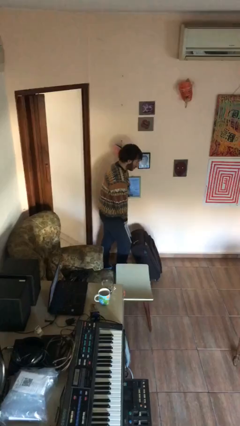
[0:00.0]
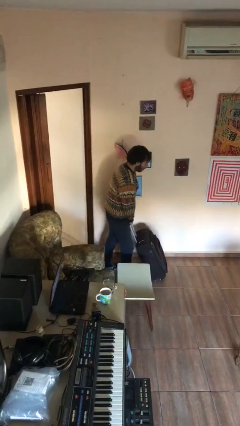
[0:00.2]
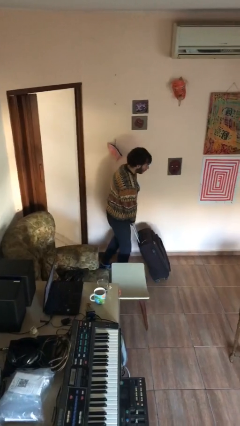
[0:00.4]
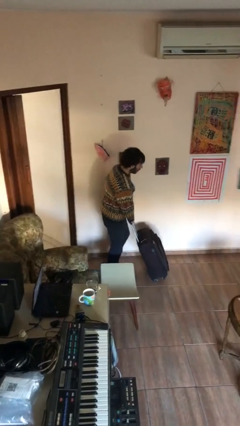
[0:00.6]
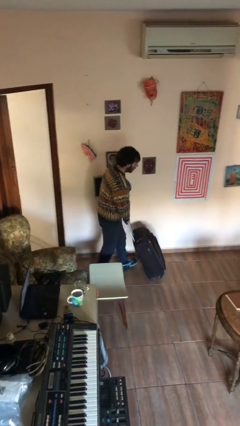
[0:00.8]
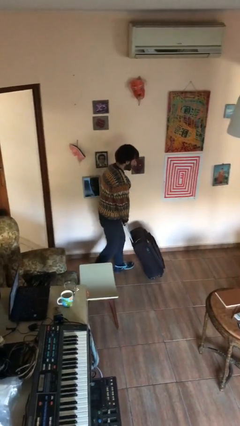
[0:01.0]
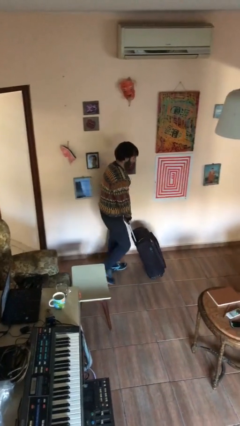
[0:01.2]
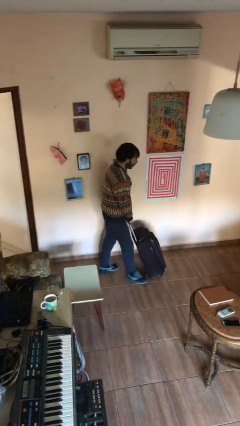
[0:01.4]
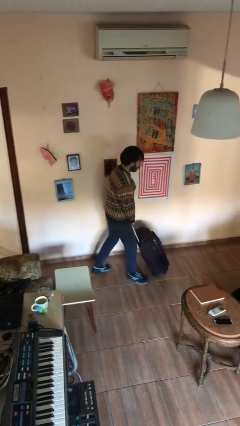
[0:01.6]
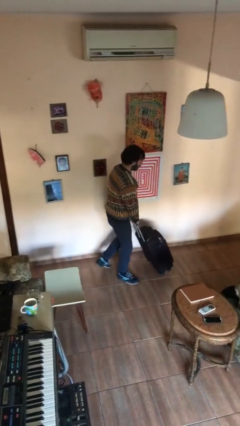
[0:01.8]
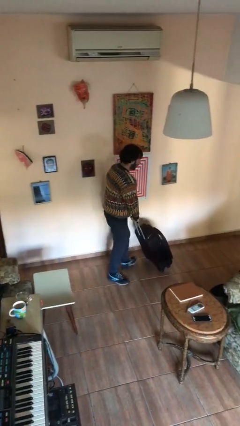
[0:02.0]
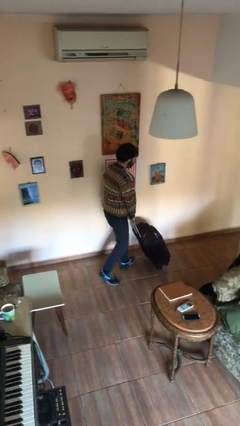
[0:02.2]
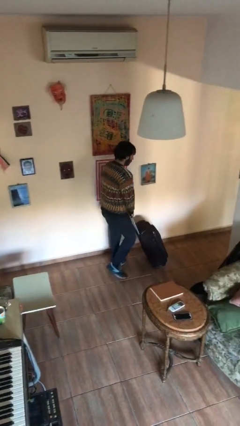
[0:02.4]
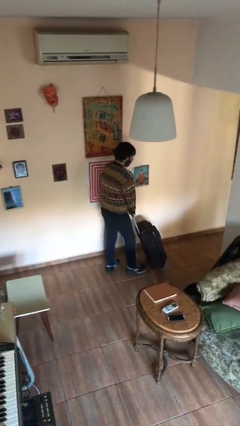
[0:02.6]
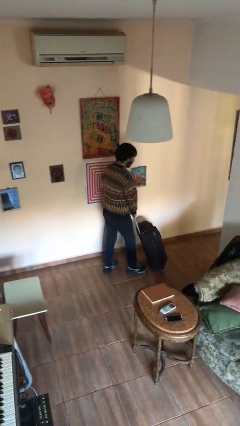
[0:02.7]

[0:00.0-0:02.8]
person pushes wheeled cart

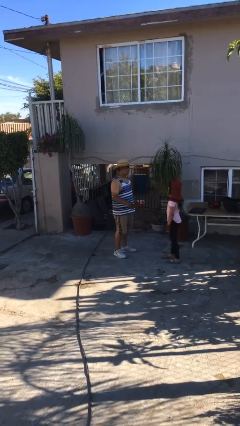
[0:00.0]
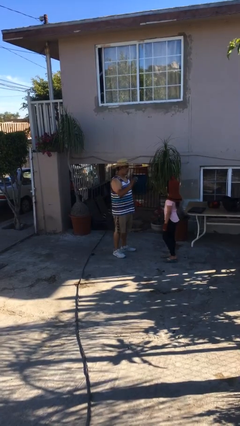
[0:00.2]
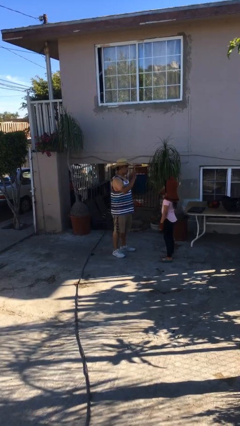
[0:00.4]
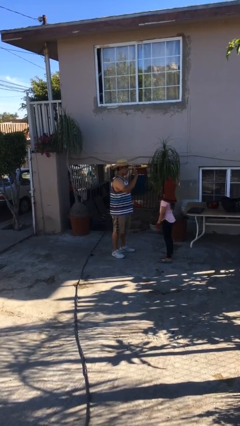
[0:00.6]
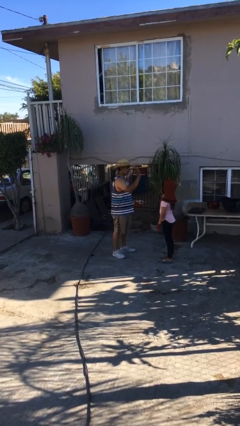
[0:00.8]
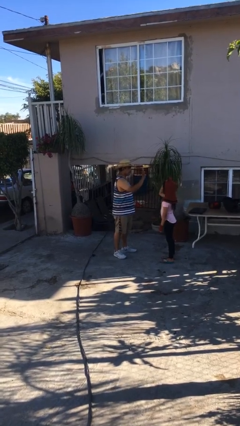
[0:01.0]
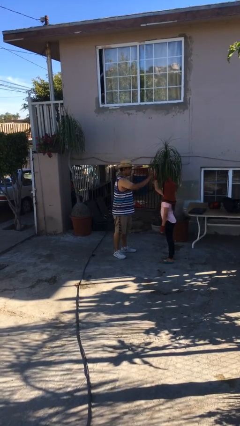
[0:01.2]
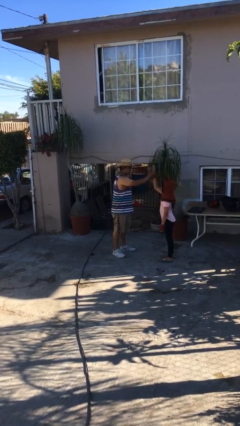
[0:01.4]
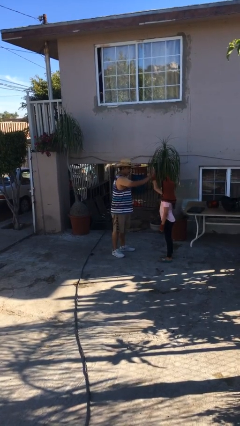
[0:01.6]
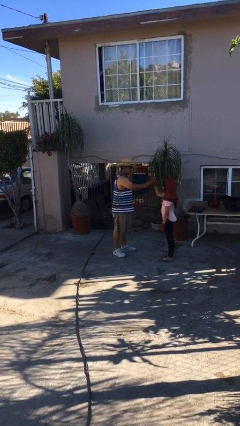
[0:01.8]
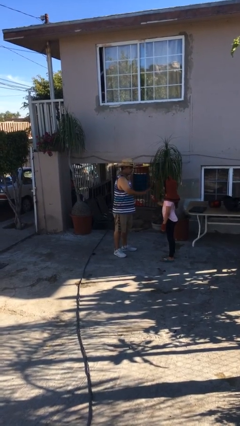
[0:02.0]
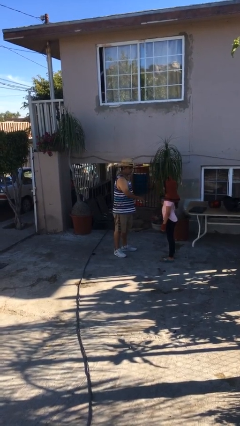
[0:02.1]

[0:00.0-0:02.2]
person highfives hand

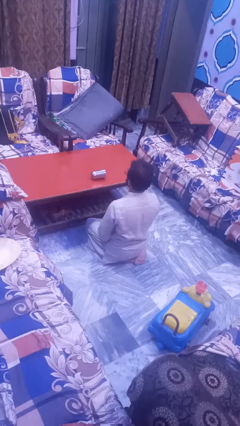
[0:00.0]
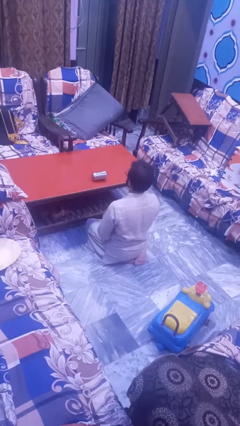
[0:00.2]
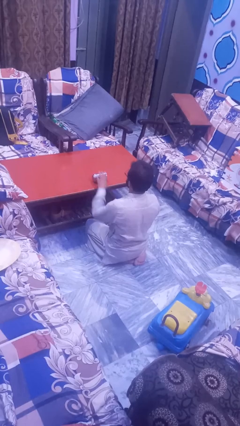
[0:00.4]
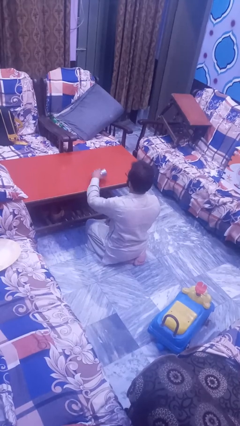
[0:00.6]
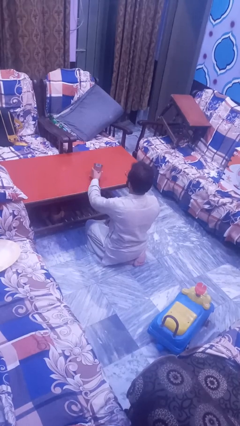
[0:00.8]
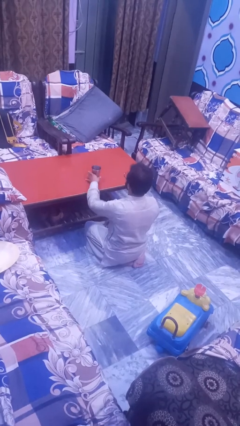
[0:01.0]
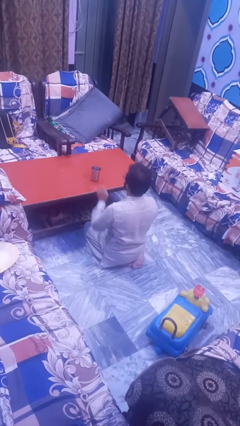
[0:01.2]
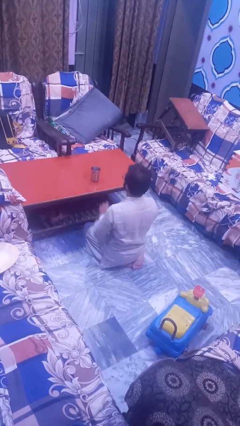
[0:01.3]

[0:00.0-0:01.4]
person sets upright glass

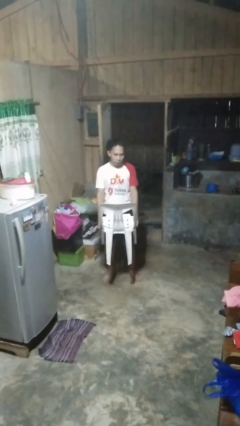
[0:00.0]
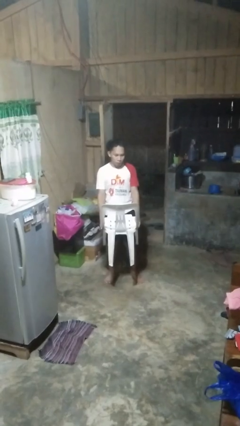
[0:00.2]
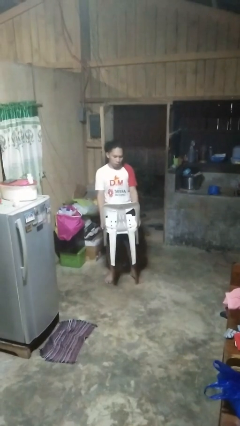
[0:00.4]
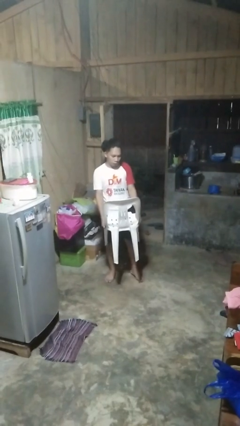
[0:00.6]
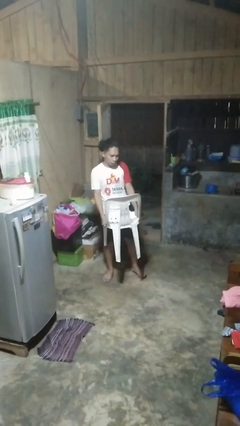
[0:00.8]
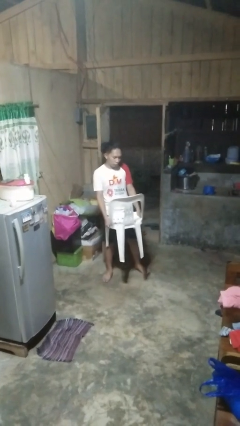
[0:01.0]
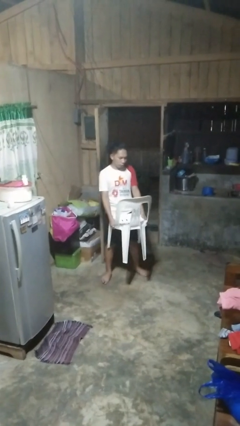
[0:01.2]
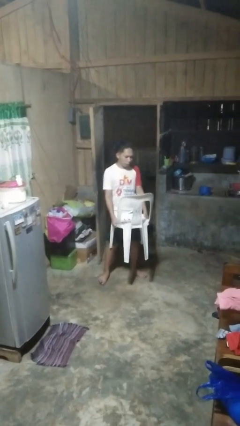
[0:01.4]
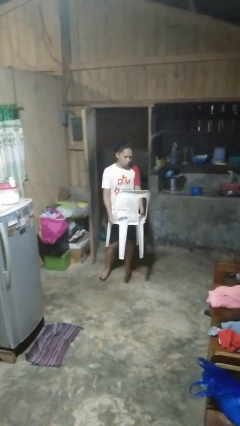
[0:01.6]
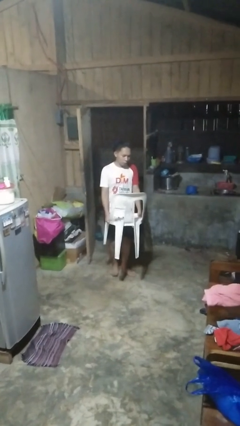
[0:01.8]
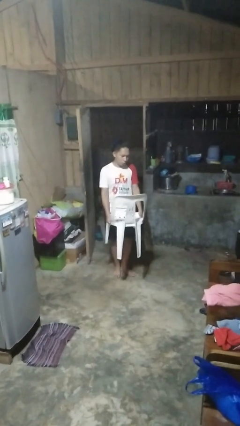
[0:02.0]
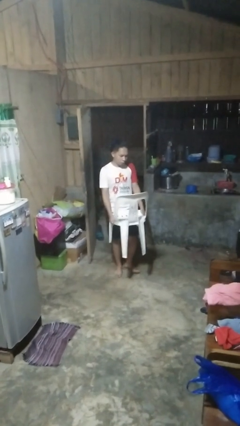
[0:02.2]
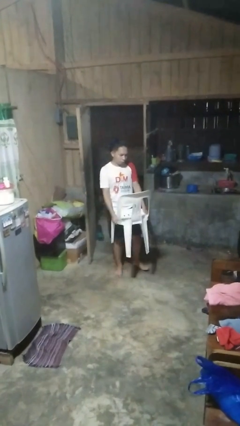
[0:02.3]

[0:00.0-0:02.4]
person carries furniture

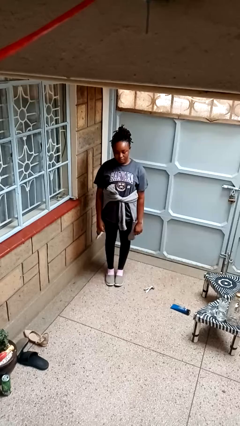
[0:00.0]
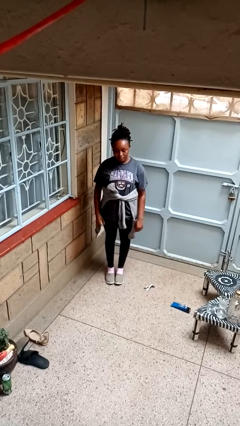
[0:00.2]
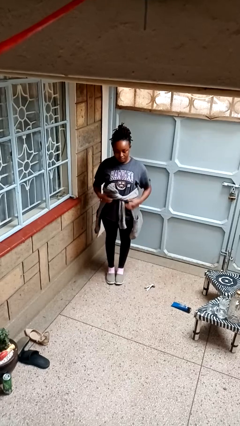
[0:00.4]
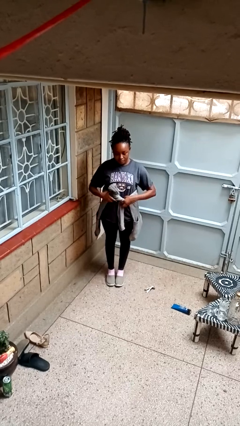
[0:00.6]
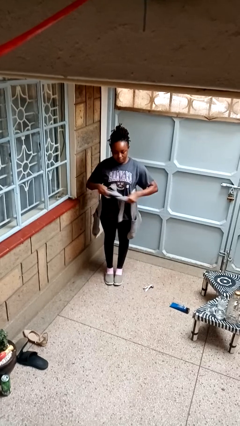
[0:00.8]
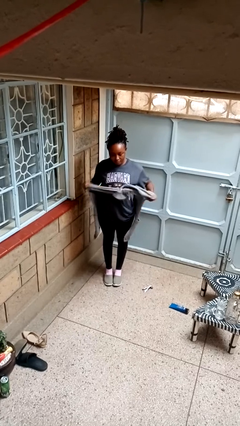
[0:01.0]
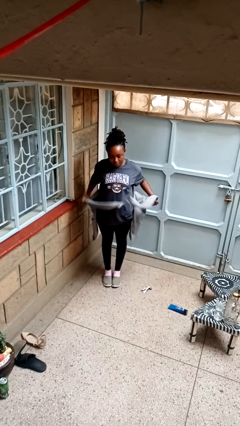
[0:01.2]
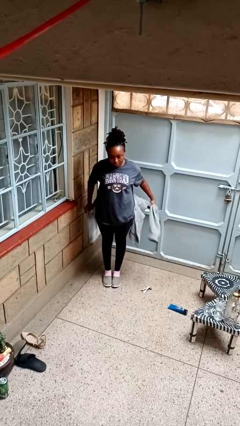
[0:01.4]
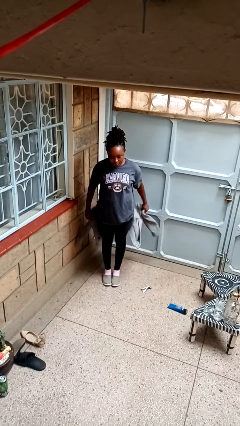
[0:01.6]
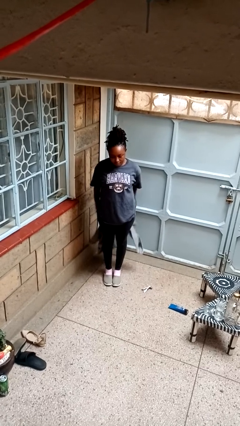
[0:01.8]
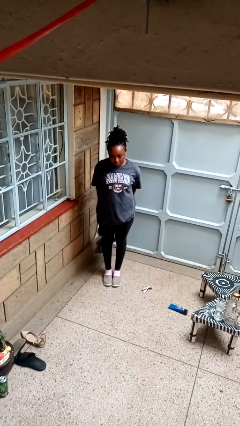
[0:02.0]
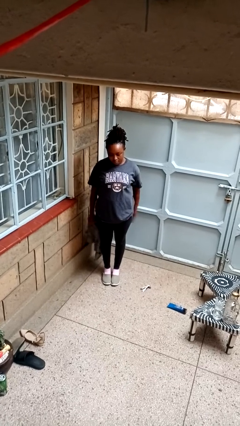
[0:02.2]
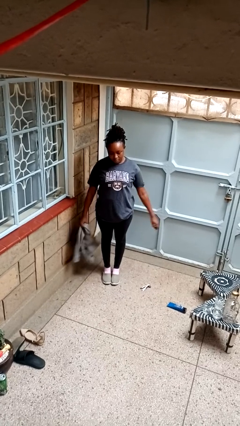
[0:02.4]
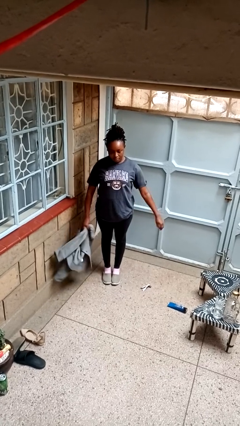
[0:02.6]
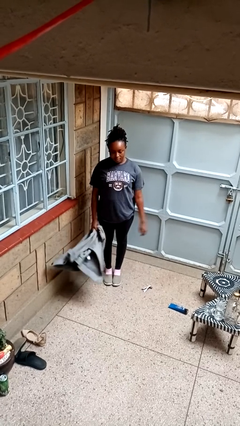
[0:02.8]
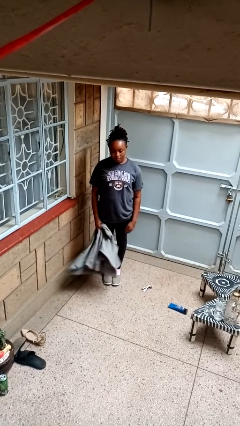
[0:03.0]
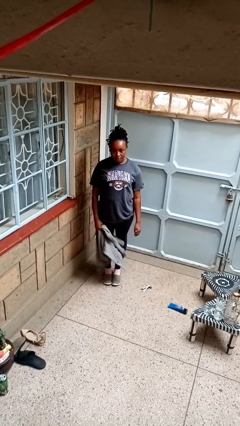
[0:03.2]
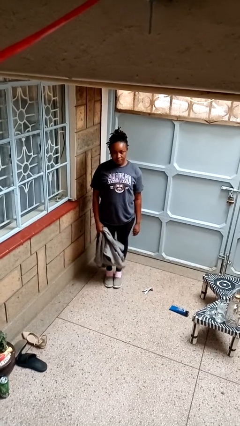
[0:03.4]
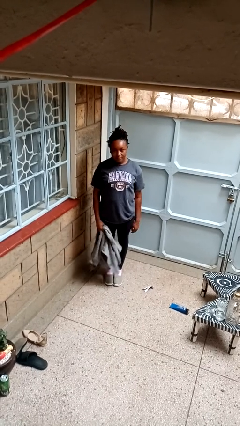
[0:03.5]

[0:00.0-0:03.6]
person unties jacket around waist

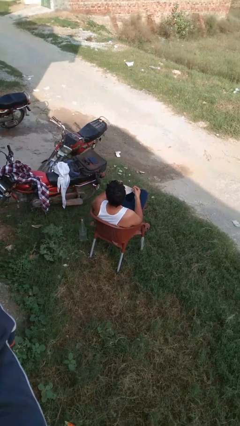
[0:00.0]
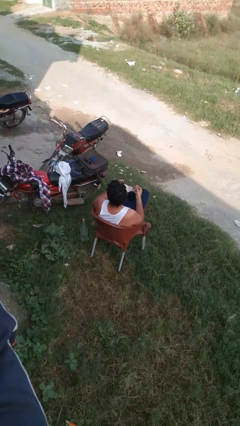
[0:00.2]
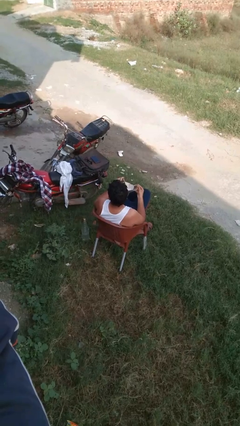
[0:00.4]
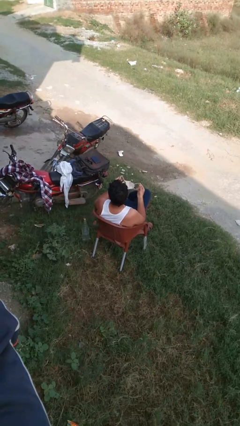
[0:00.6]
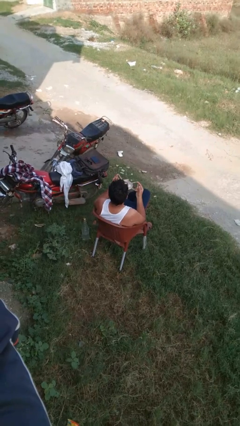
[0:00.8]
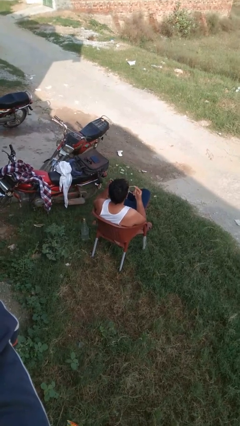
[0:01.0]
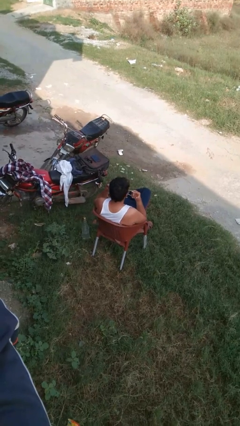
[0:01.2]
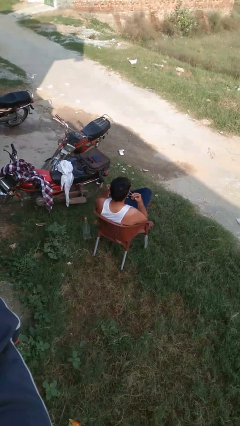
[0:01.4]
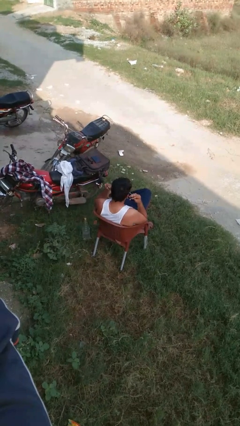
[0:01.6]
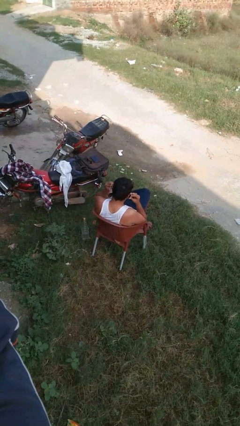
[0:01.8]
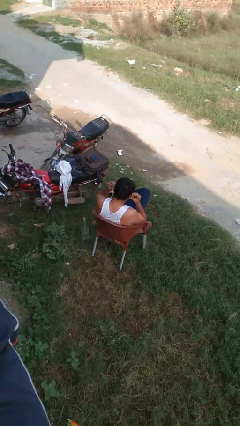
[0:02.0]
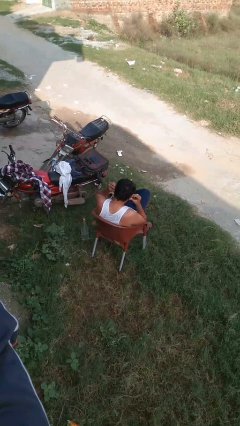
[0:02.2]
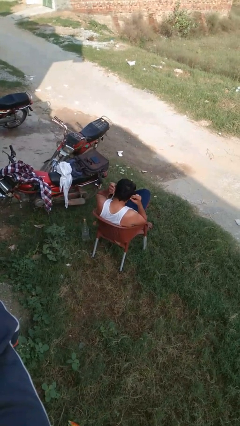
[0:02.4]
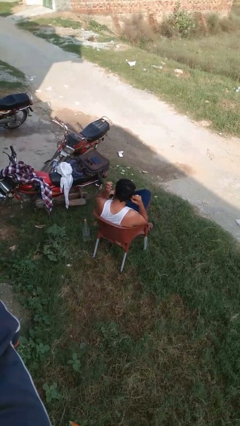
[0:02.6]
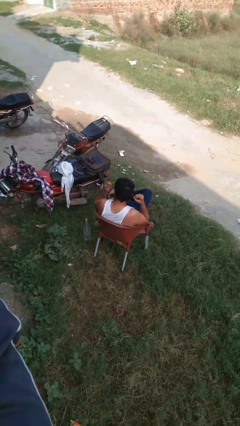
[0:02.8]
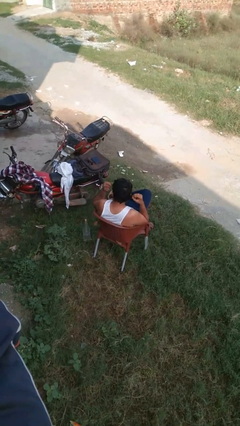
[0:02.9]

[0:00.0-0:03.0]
person puts on facemask

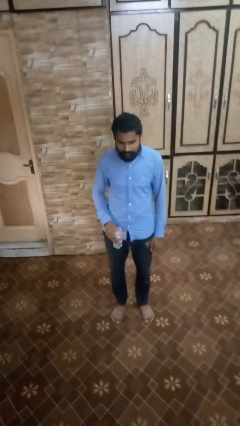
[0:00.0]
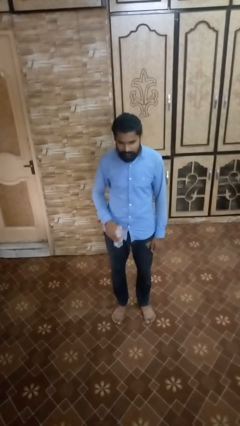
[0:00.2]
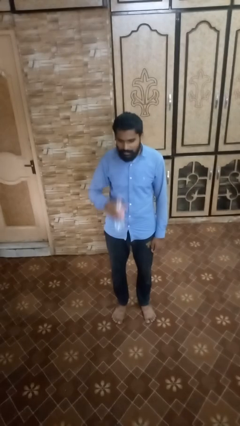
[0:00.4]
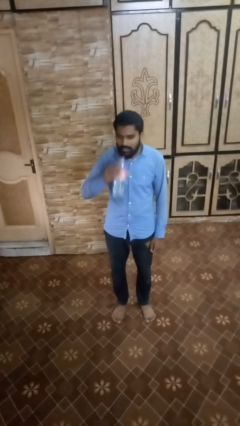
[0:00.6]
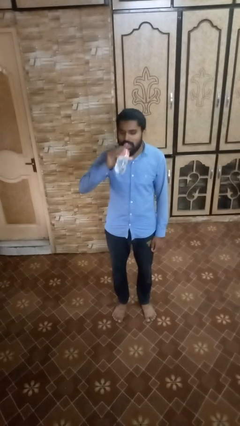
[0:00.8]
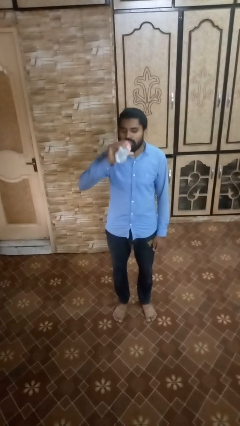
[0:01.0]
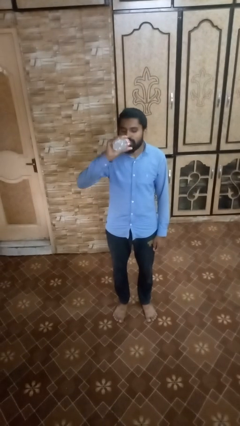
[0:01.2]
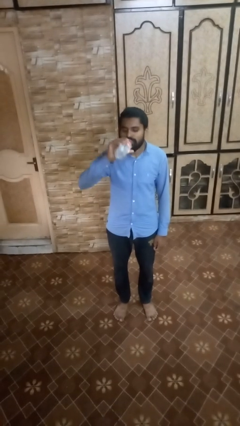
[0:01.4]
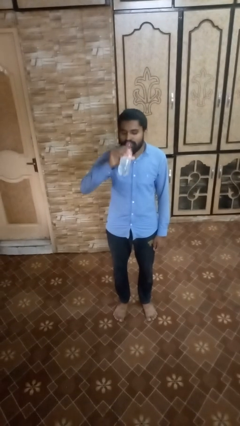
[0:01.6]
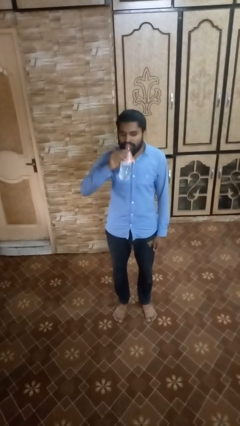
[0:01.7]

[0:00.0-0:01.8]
person drinks from bottle
